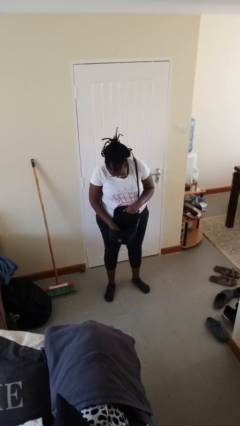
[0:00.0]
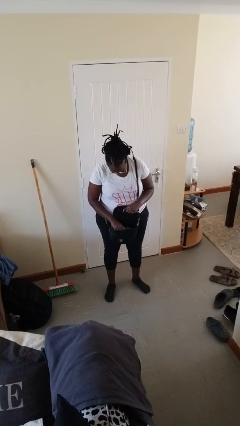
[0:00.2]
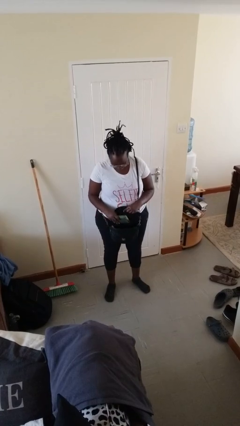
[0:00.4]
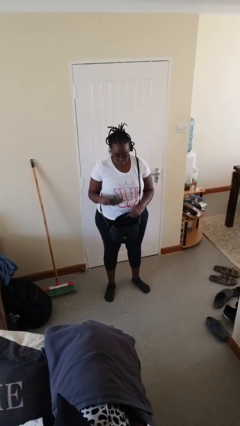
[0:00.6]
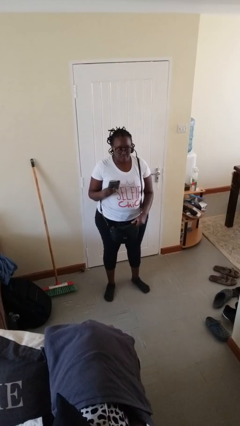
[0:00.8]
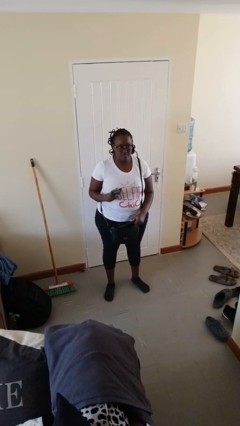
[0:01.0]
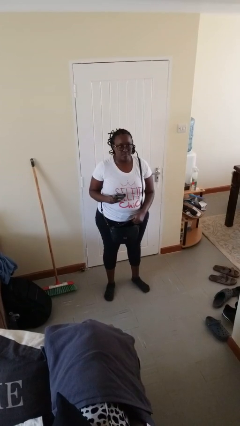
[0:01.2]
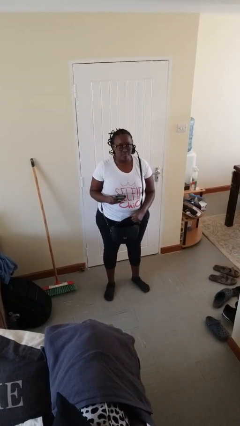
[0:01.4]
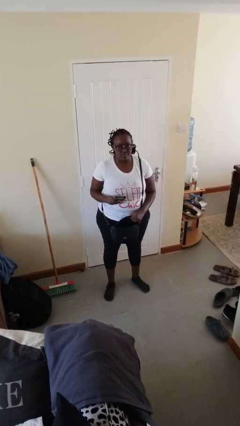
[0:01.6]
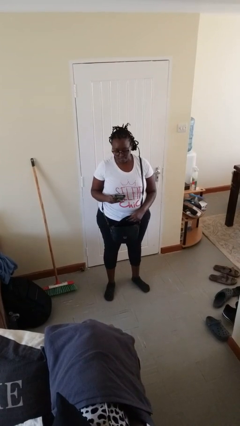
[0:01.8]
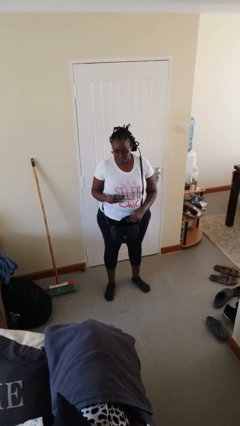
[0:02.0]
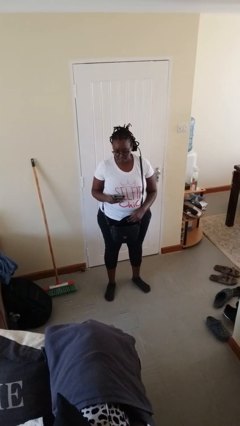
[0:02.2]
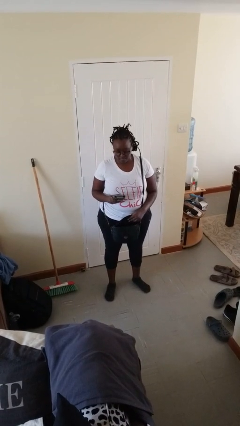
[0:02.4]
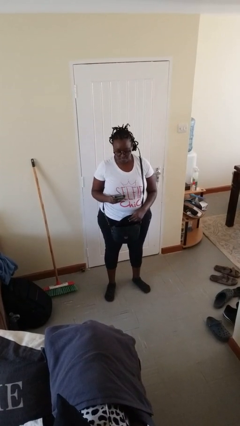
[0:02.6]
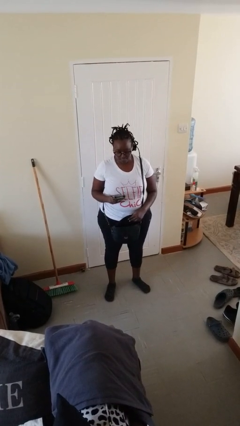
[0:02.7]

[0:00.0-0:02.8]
person takes object from purse

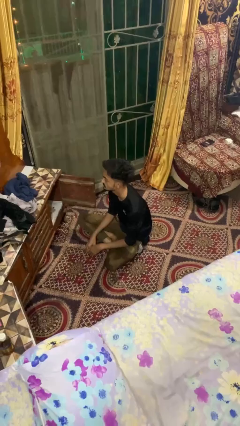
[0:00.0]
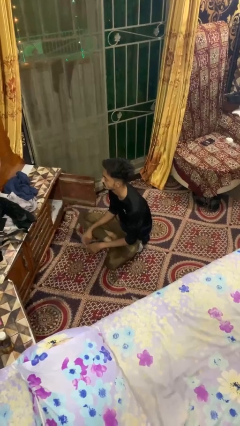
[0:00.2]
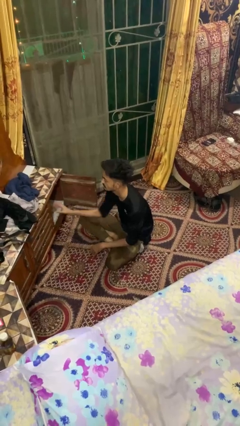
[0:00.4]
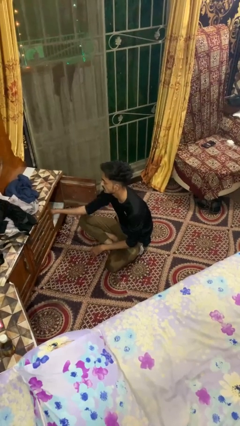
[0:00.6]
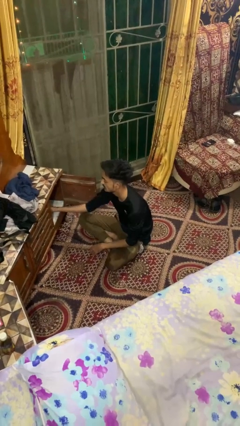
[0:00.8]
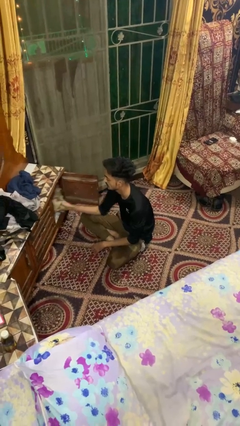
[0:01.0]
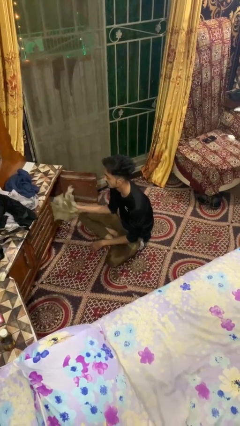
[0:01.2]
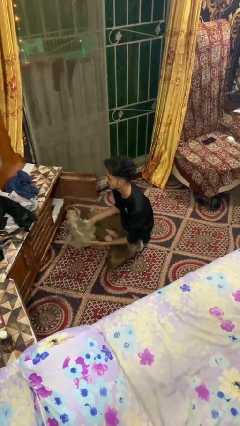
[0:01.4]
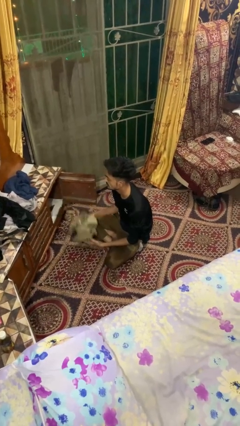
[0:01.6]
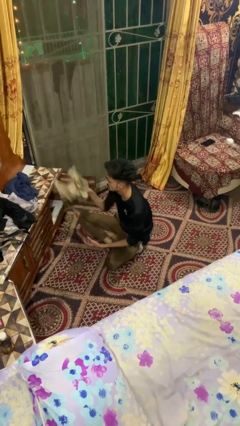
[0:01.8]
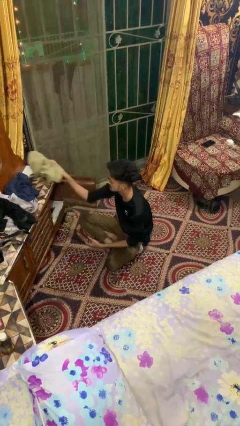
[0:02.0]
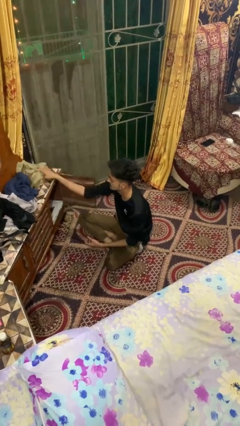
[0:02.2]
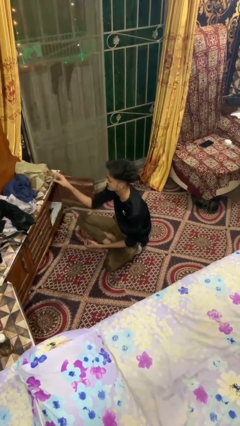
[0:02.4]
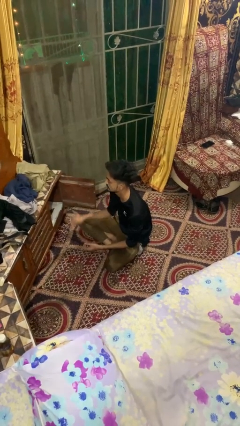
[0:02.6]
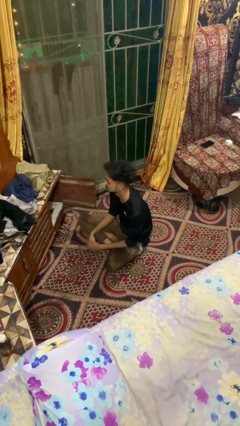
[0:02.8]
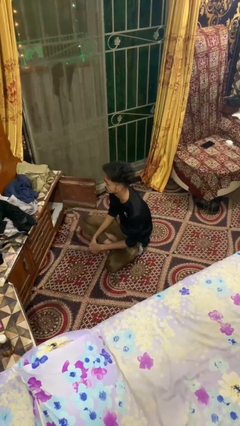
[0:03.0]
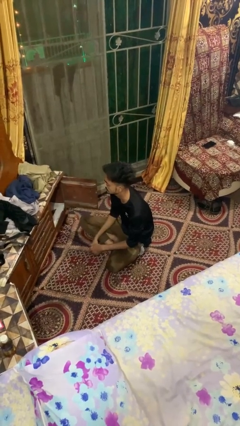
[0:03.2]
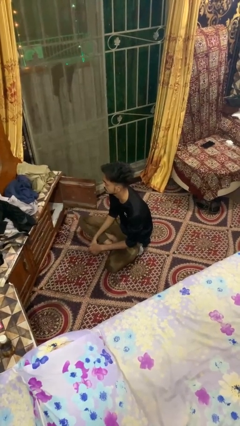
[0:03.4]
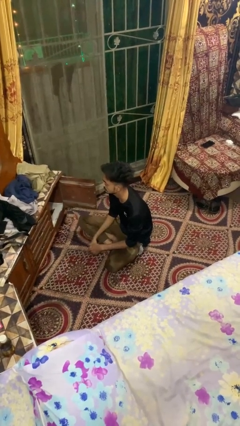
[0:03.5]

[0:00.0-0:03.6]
person takes clothes from dresser

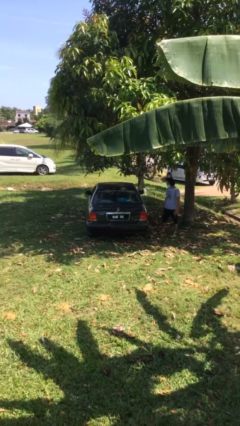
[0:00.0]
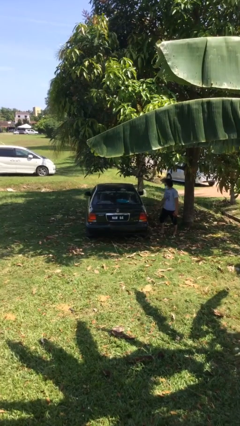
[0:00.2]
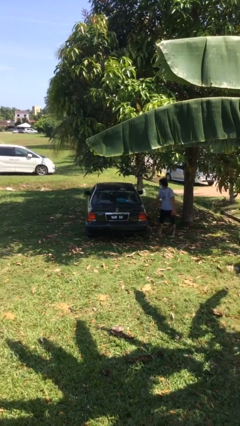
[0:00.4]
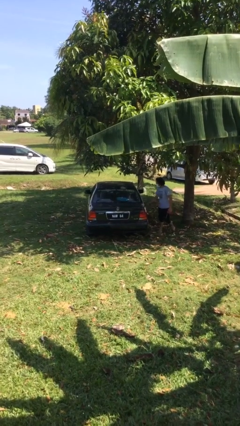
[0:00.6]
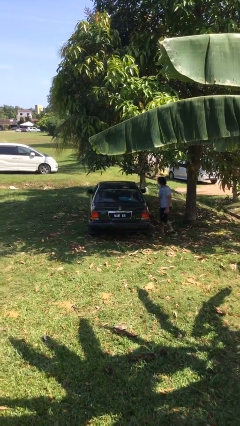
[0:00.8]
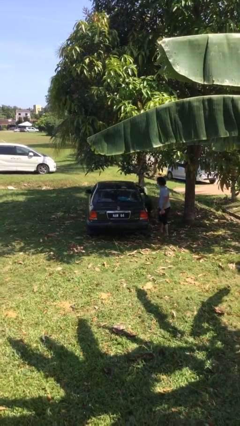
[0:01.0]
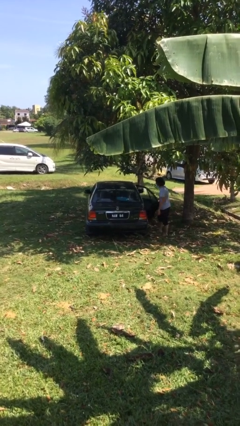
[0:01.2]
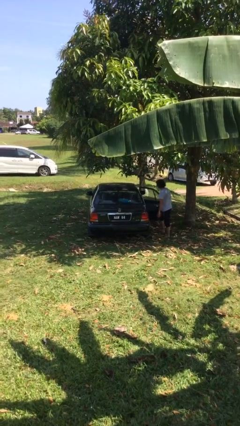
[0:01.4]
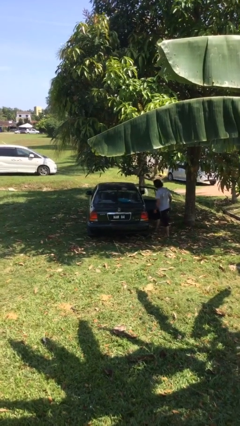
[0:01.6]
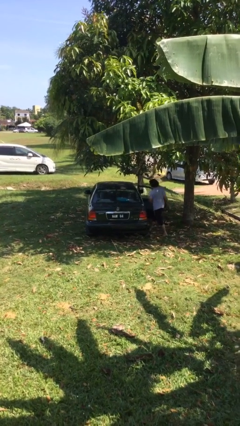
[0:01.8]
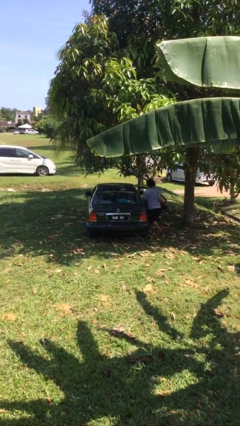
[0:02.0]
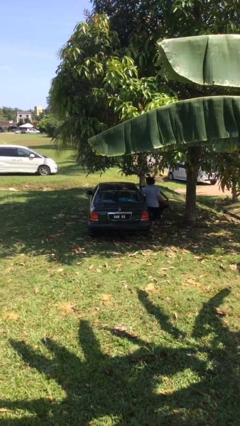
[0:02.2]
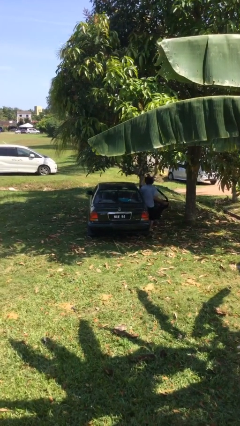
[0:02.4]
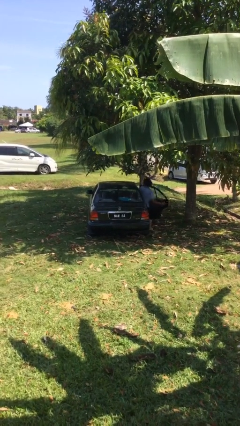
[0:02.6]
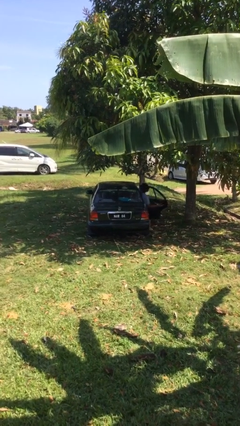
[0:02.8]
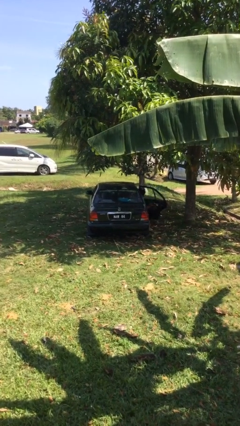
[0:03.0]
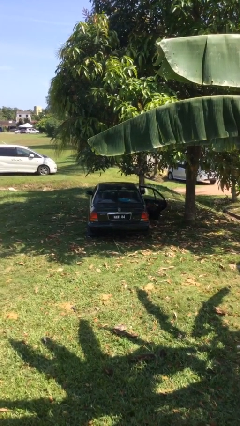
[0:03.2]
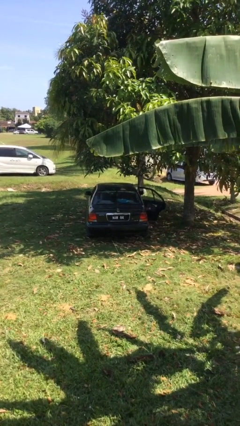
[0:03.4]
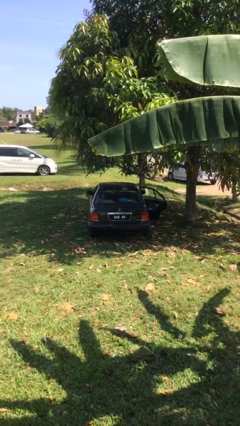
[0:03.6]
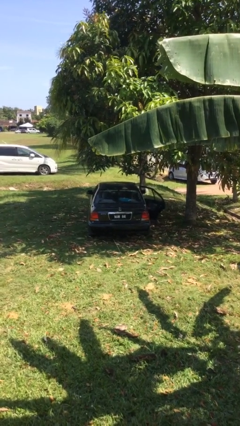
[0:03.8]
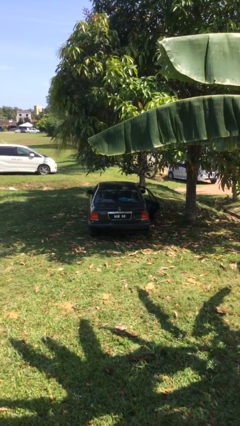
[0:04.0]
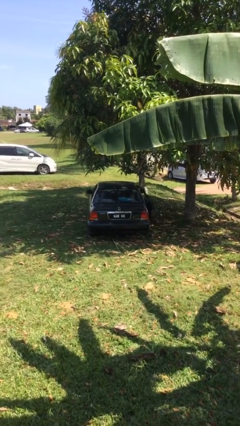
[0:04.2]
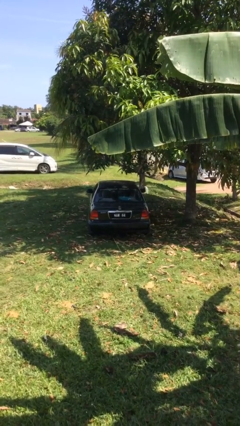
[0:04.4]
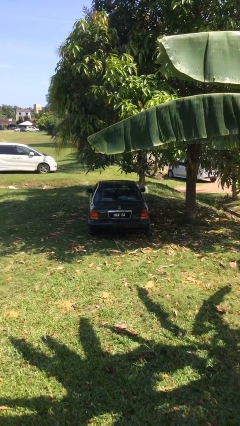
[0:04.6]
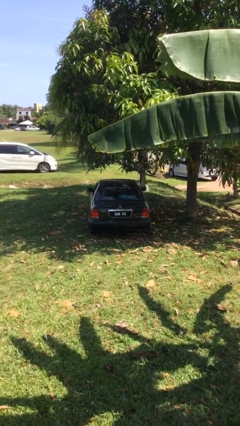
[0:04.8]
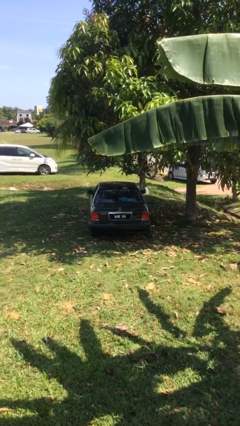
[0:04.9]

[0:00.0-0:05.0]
car picks up person

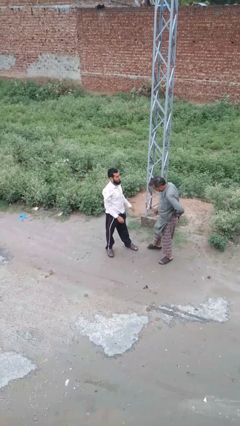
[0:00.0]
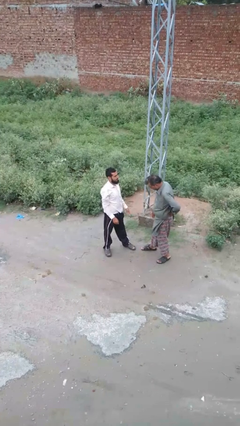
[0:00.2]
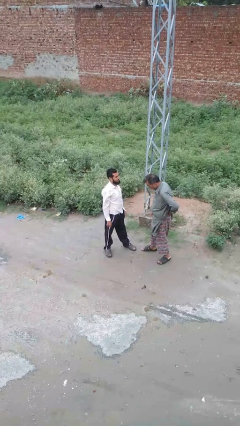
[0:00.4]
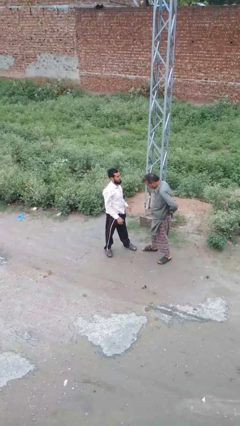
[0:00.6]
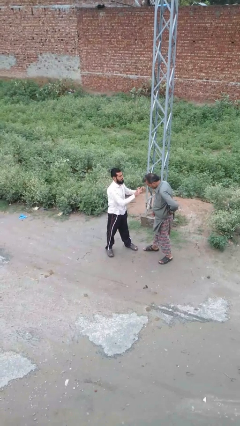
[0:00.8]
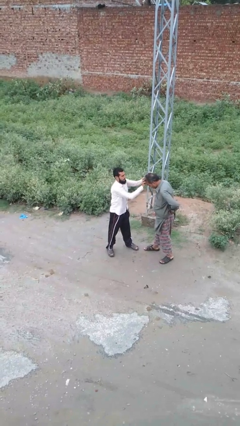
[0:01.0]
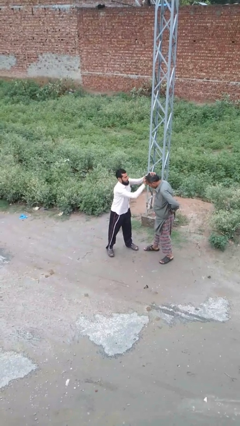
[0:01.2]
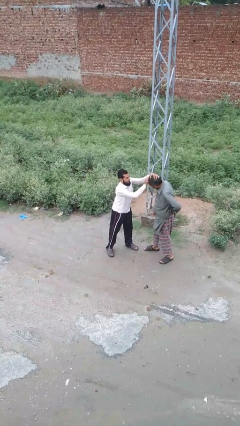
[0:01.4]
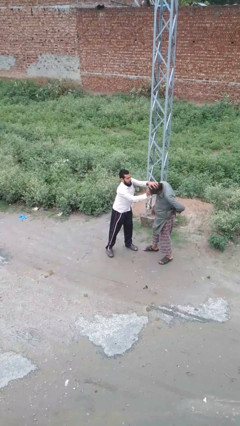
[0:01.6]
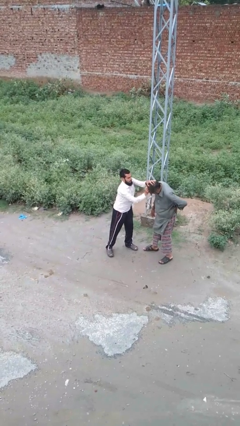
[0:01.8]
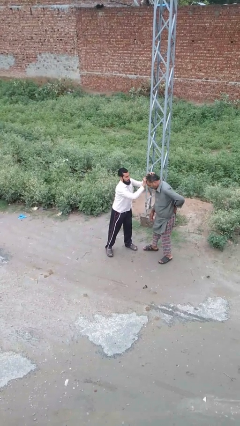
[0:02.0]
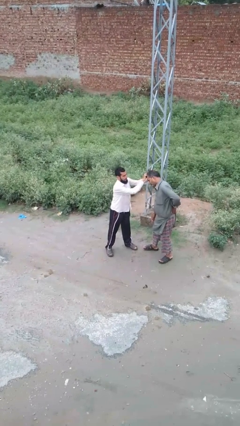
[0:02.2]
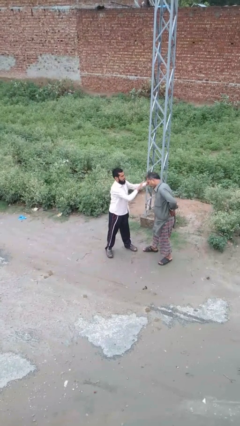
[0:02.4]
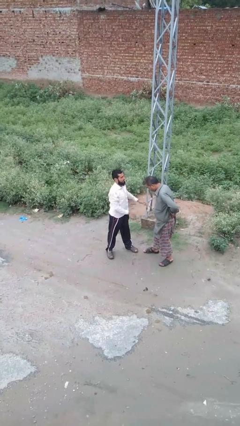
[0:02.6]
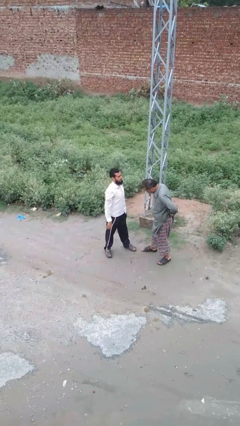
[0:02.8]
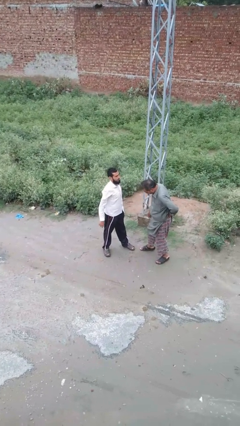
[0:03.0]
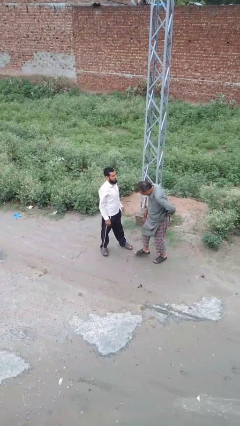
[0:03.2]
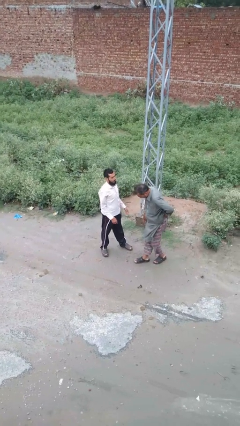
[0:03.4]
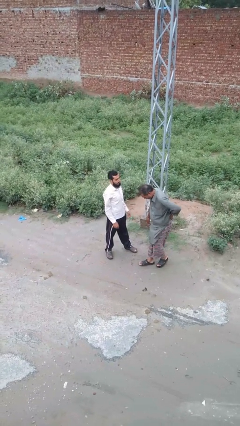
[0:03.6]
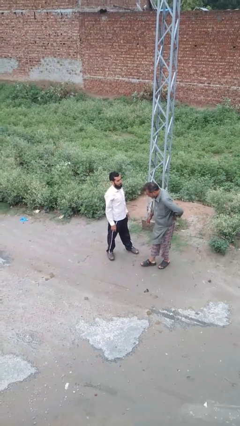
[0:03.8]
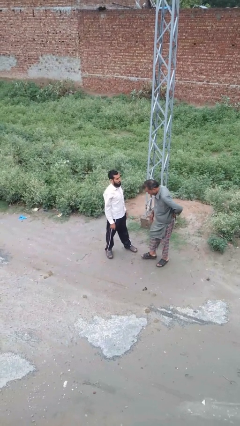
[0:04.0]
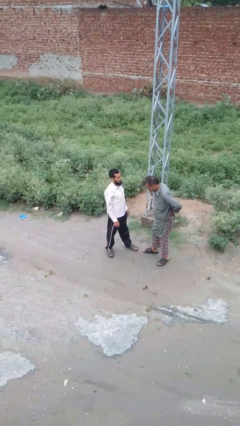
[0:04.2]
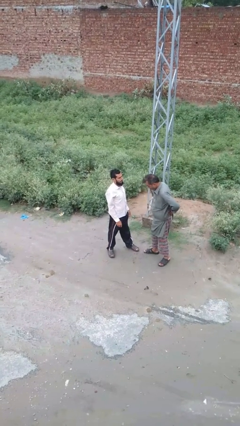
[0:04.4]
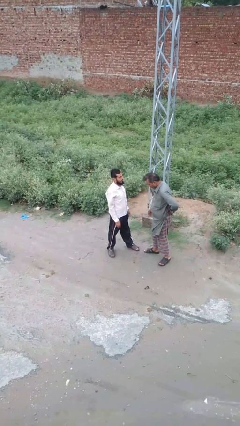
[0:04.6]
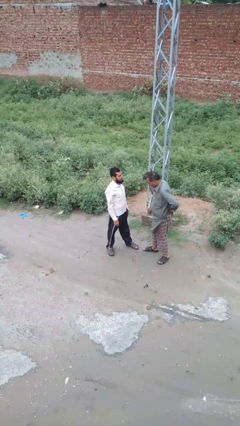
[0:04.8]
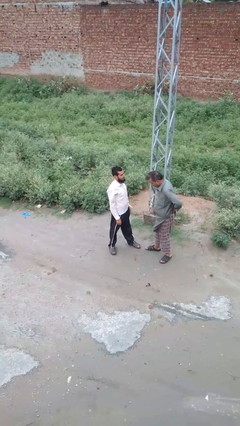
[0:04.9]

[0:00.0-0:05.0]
person grabs person by hair

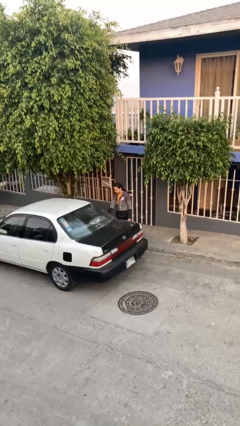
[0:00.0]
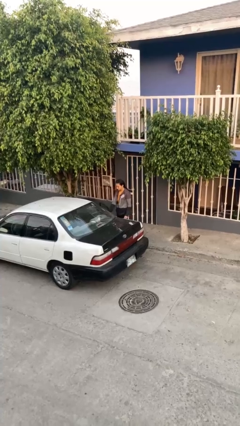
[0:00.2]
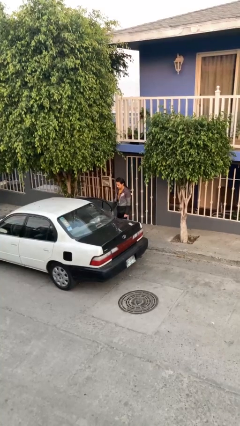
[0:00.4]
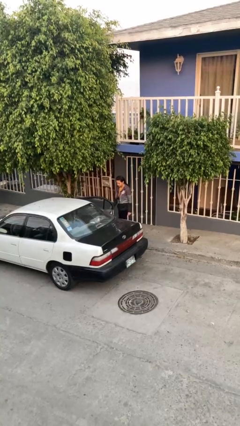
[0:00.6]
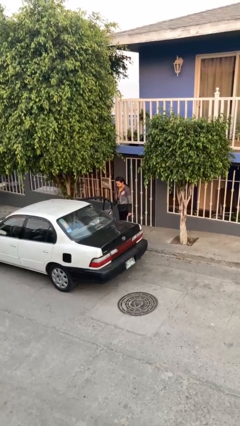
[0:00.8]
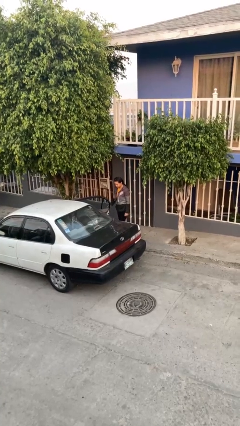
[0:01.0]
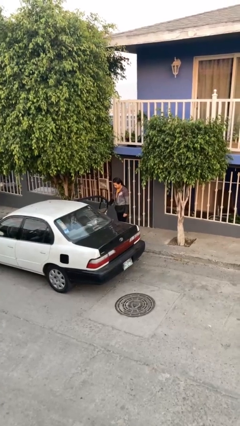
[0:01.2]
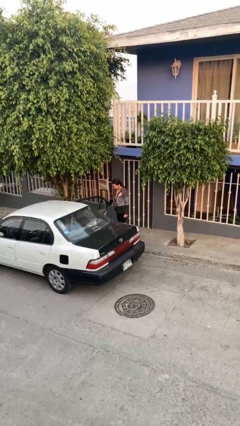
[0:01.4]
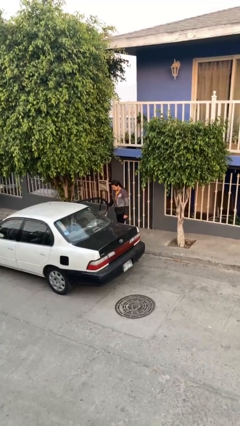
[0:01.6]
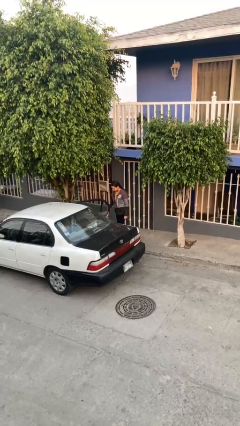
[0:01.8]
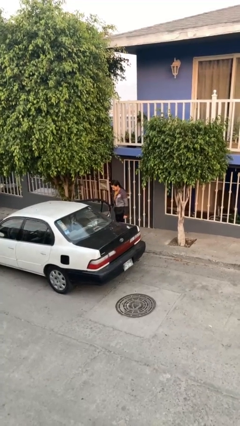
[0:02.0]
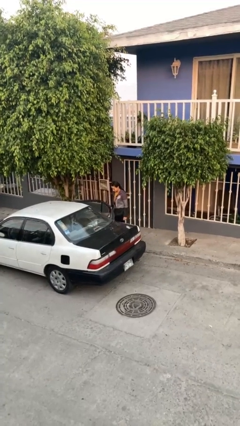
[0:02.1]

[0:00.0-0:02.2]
person opens car door
